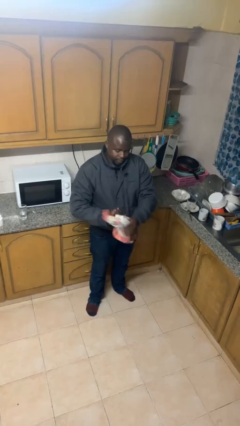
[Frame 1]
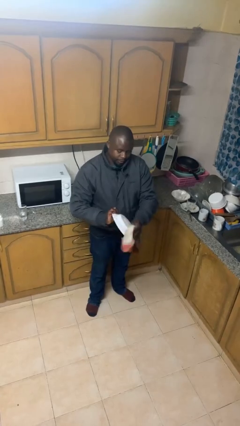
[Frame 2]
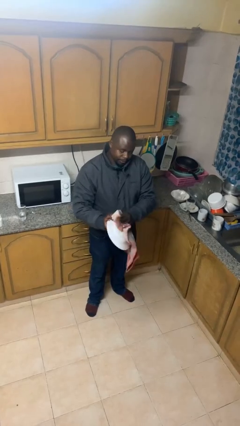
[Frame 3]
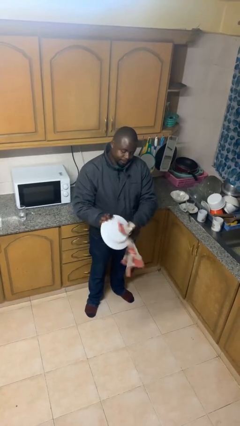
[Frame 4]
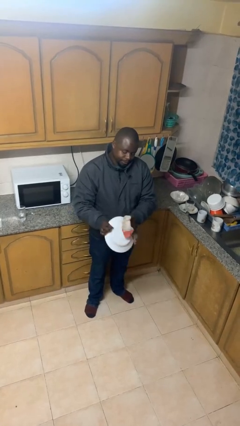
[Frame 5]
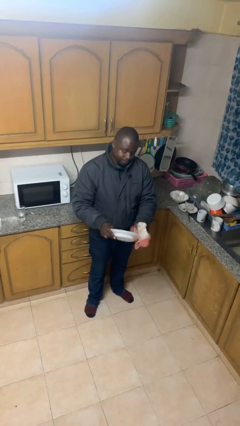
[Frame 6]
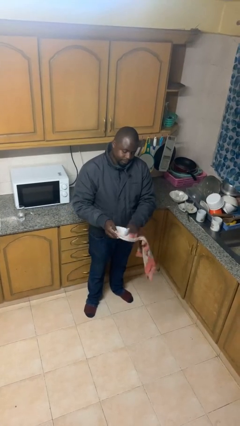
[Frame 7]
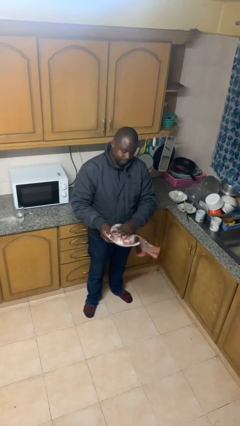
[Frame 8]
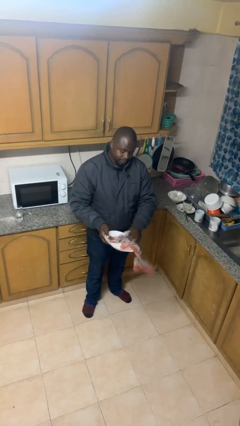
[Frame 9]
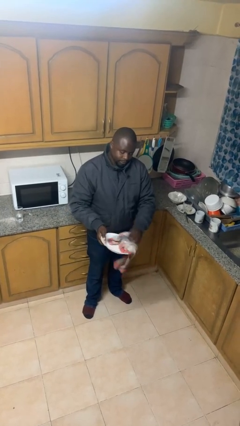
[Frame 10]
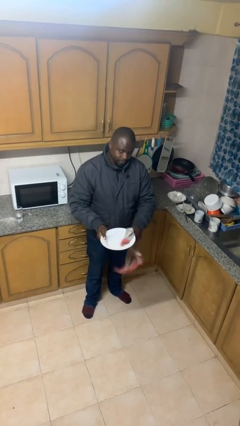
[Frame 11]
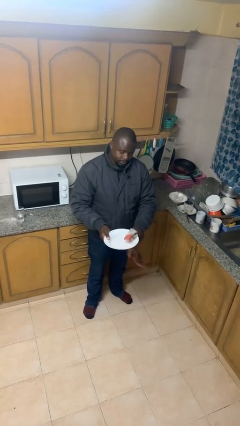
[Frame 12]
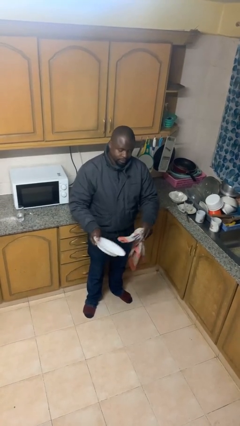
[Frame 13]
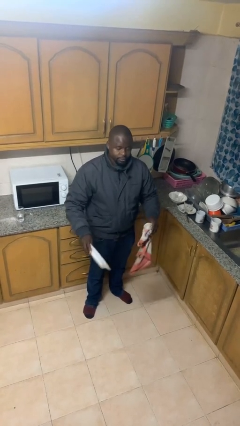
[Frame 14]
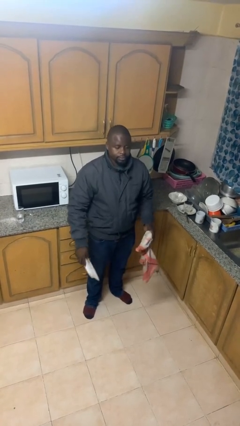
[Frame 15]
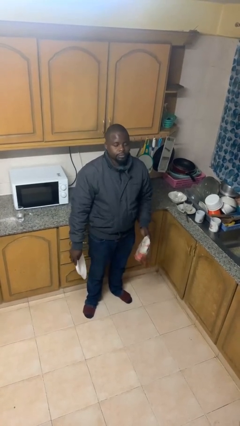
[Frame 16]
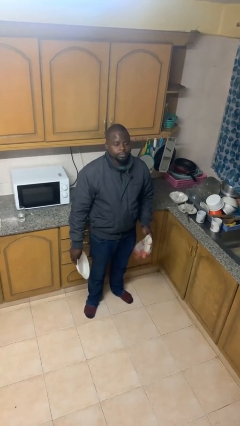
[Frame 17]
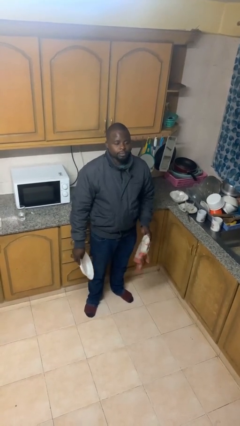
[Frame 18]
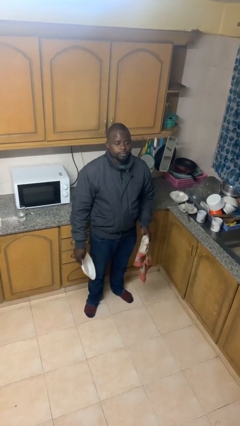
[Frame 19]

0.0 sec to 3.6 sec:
person dries dish

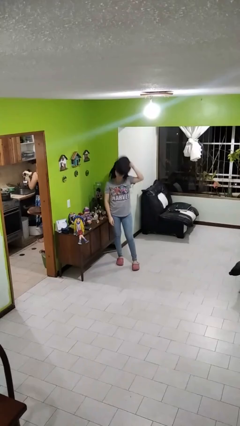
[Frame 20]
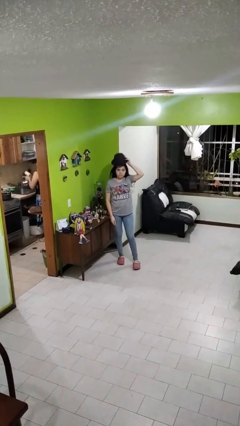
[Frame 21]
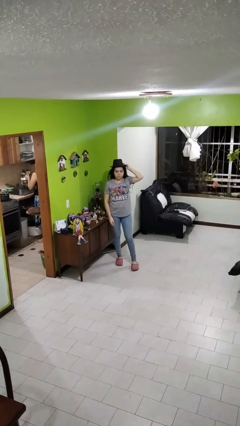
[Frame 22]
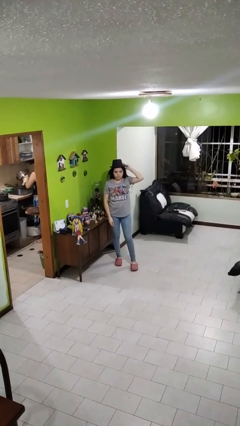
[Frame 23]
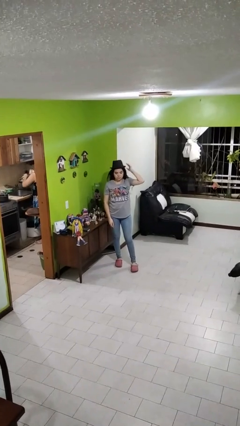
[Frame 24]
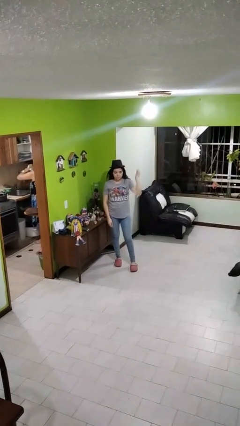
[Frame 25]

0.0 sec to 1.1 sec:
person puts on hat

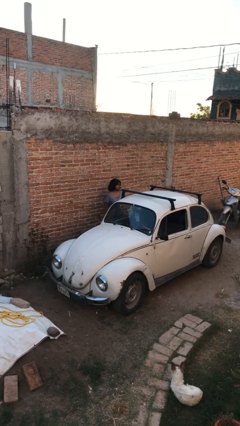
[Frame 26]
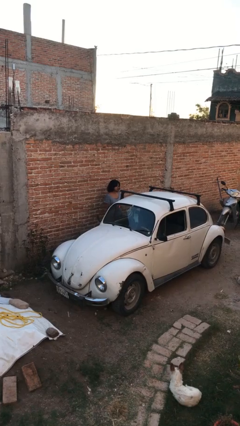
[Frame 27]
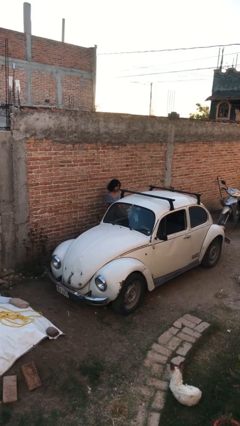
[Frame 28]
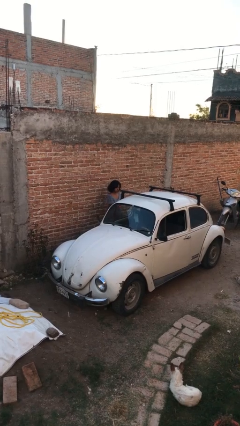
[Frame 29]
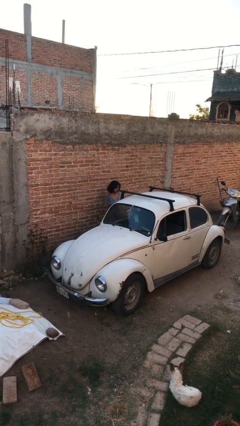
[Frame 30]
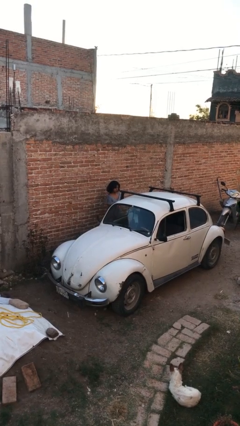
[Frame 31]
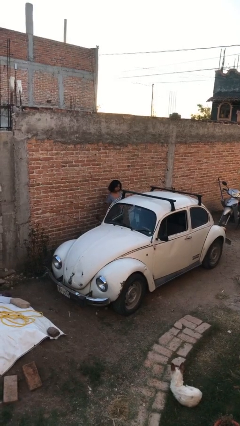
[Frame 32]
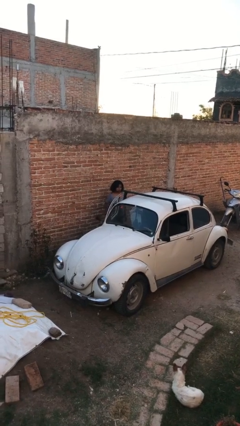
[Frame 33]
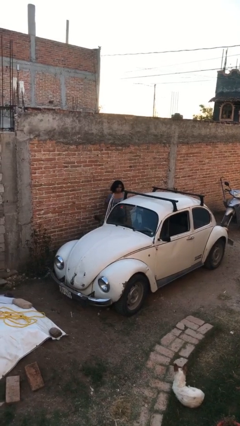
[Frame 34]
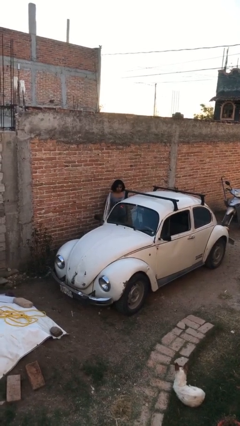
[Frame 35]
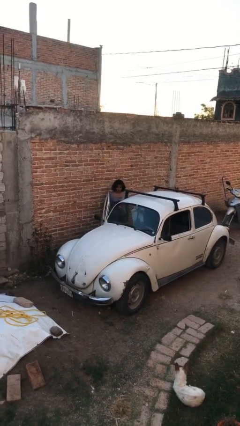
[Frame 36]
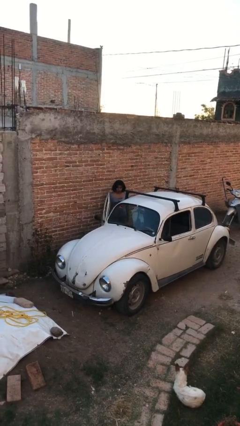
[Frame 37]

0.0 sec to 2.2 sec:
person opens car door

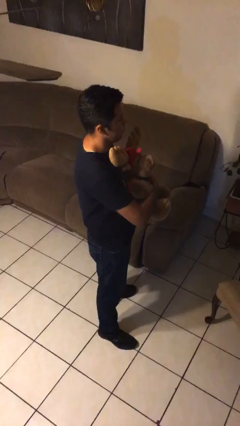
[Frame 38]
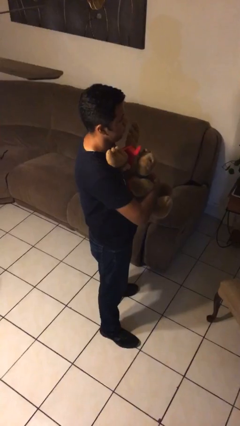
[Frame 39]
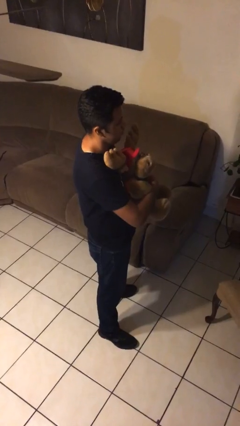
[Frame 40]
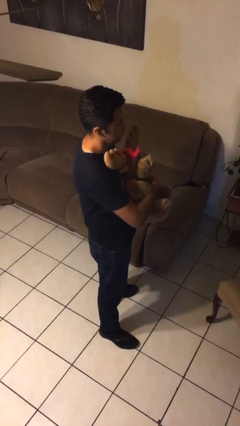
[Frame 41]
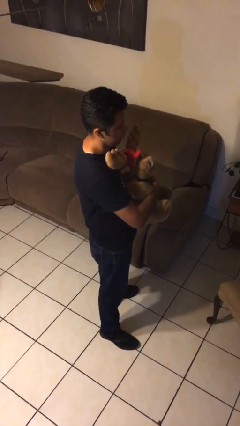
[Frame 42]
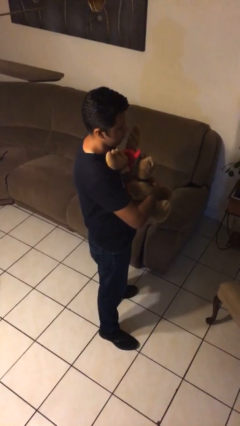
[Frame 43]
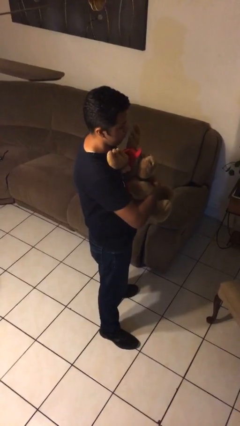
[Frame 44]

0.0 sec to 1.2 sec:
person hugs stuffed animal

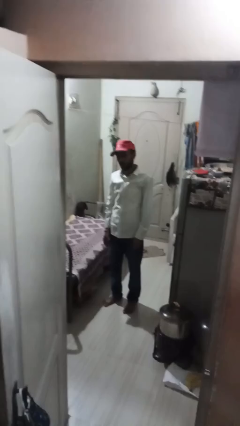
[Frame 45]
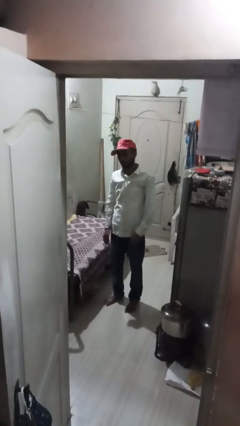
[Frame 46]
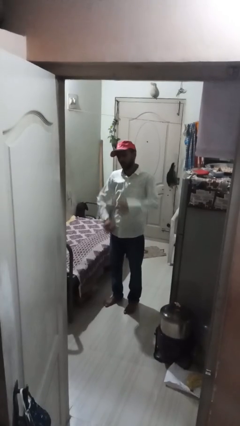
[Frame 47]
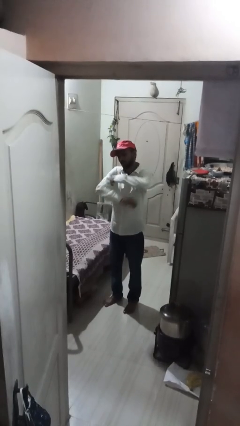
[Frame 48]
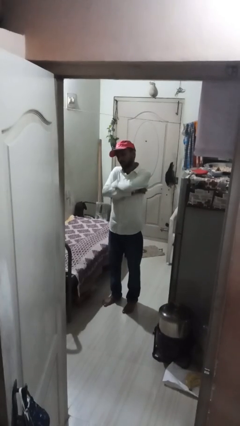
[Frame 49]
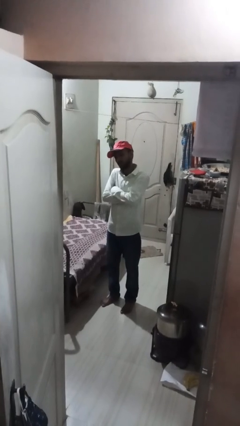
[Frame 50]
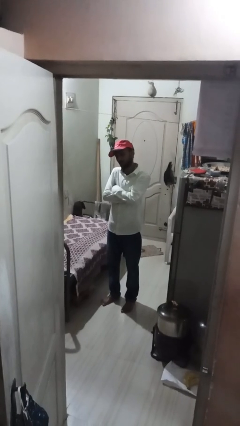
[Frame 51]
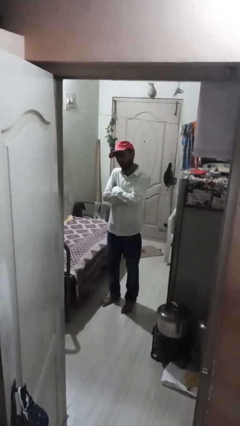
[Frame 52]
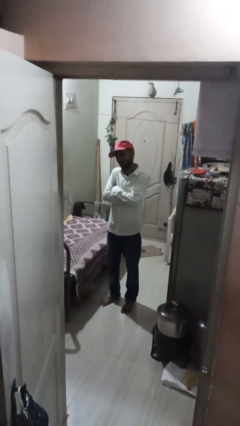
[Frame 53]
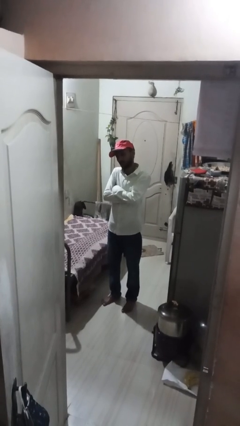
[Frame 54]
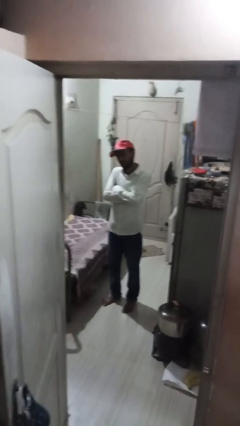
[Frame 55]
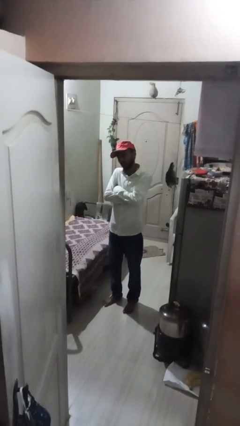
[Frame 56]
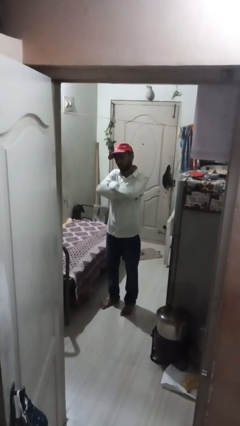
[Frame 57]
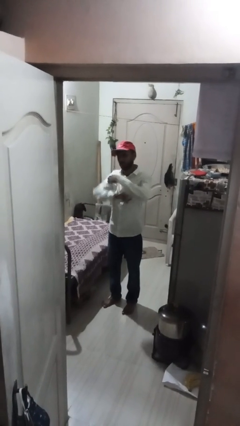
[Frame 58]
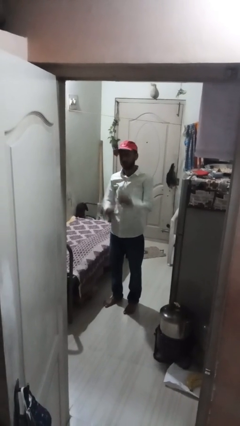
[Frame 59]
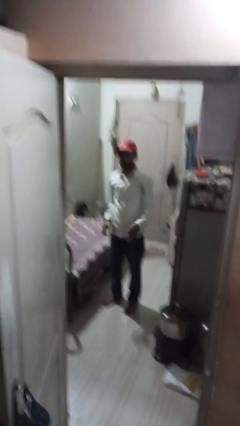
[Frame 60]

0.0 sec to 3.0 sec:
person crosses arms

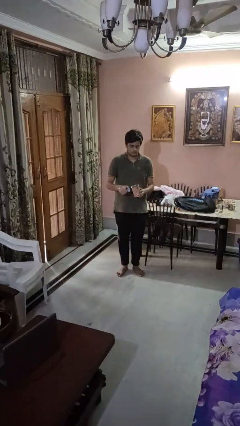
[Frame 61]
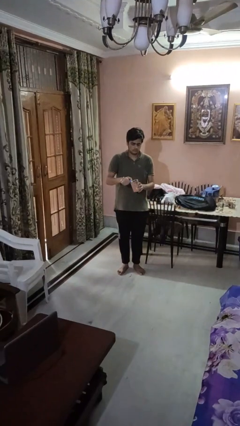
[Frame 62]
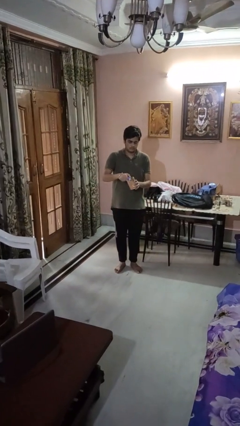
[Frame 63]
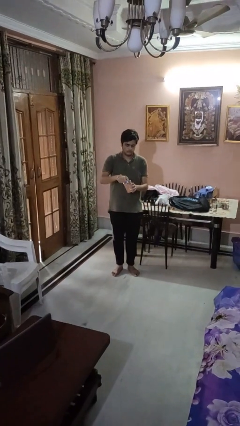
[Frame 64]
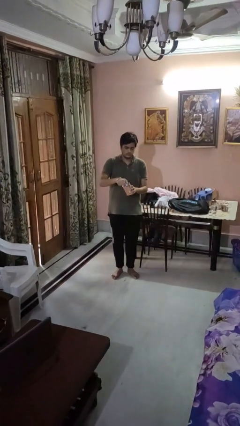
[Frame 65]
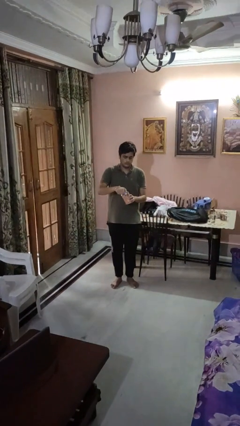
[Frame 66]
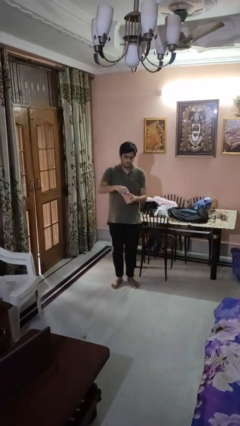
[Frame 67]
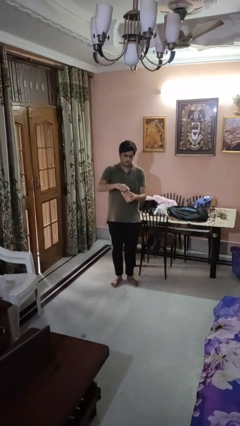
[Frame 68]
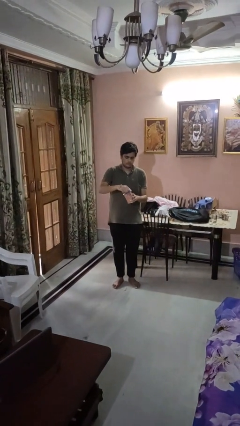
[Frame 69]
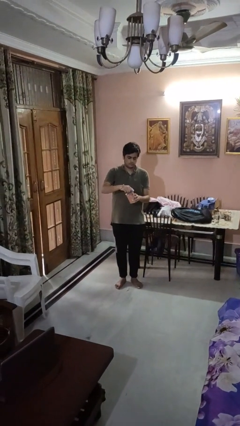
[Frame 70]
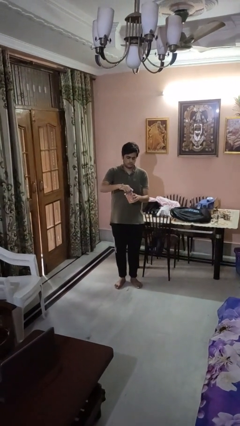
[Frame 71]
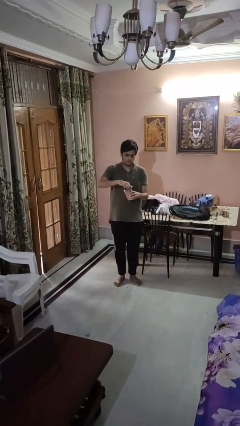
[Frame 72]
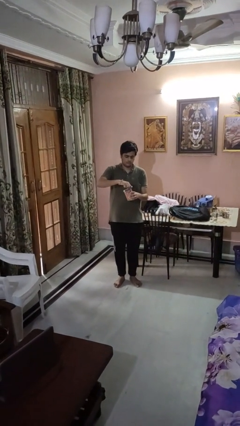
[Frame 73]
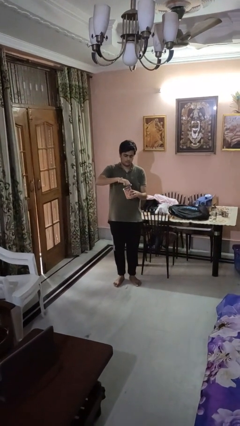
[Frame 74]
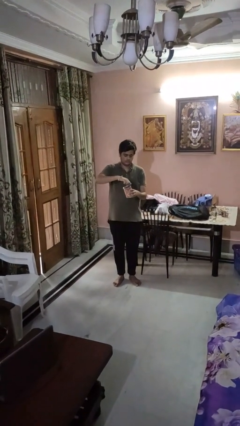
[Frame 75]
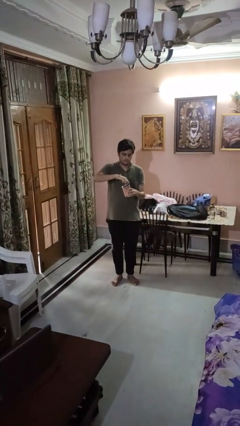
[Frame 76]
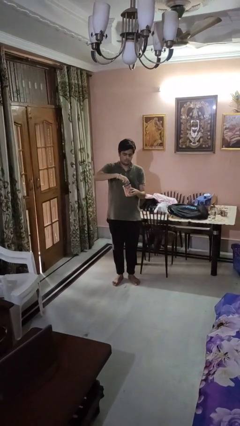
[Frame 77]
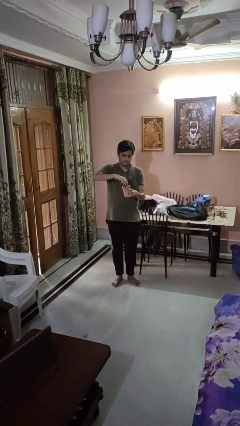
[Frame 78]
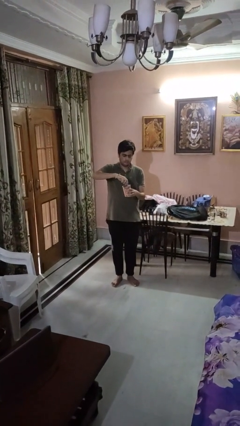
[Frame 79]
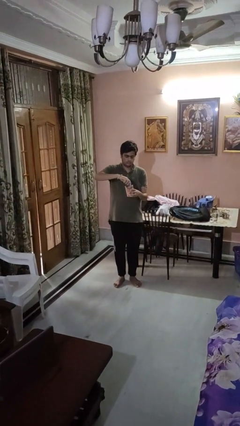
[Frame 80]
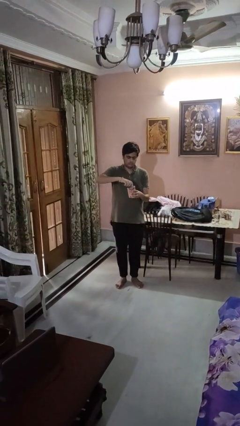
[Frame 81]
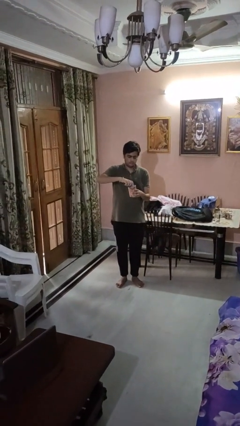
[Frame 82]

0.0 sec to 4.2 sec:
person opens can with can opener

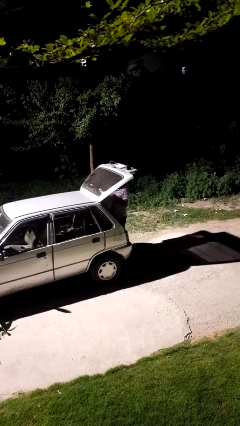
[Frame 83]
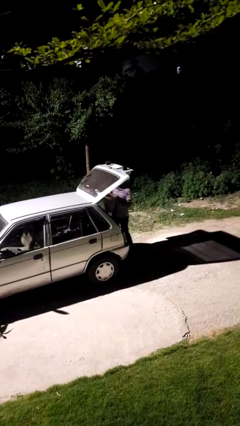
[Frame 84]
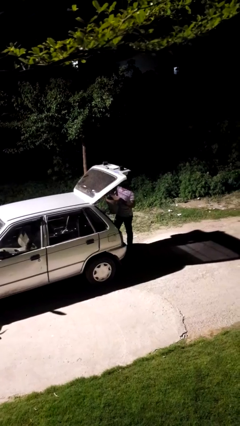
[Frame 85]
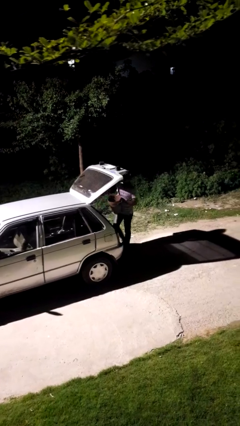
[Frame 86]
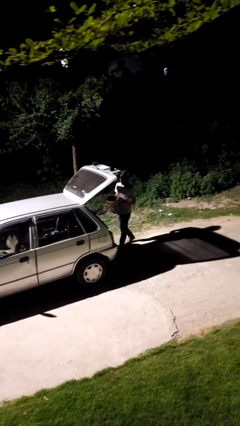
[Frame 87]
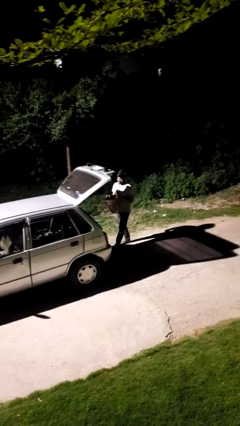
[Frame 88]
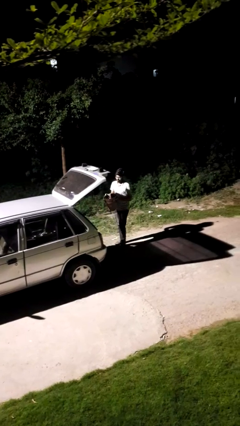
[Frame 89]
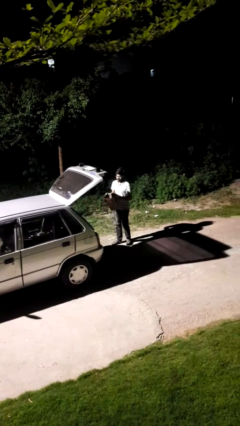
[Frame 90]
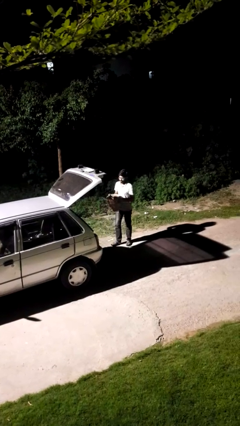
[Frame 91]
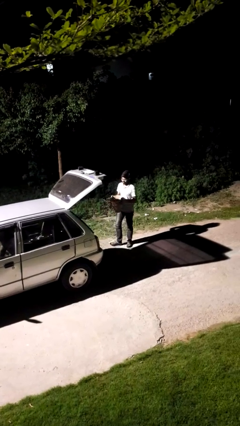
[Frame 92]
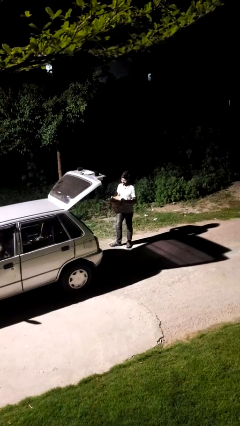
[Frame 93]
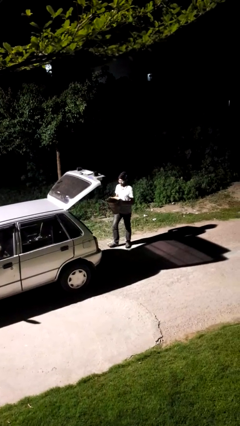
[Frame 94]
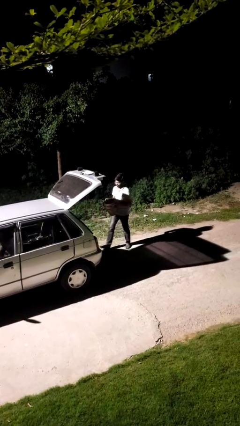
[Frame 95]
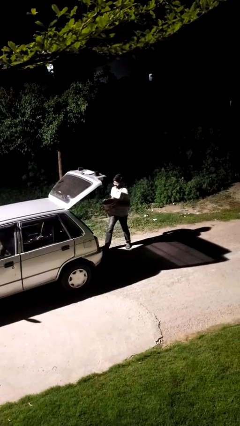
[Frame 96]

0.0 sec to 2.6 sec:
person unloads car
